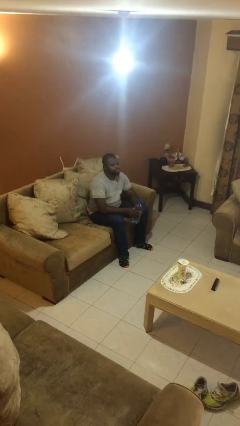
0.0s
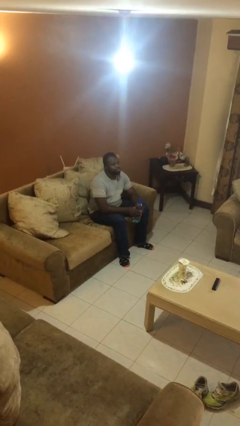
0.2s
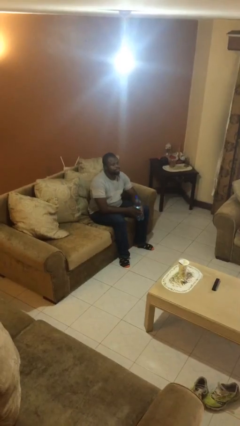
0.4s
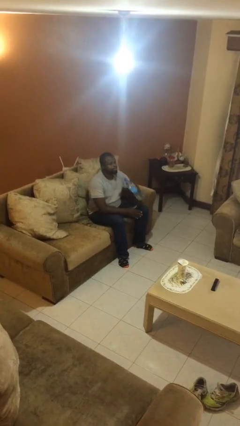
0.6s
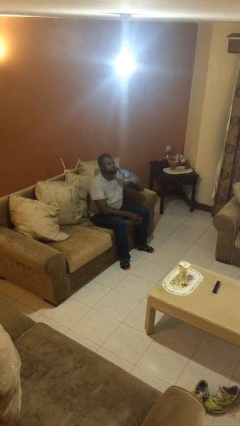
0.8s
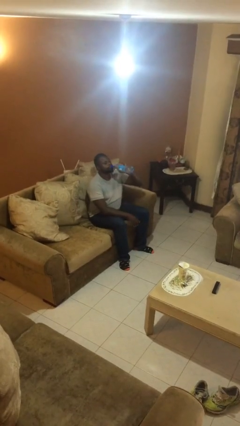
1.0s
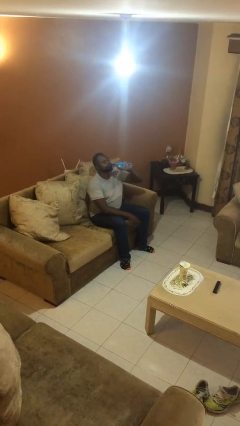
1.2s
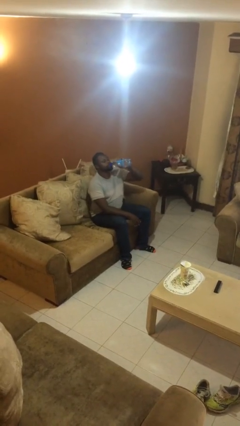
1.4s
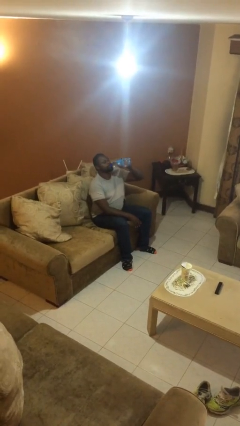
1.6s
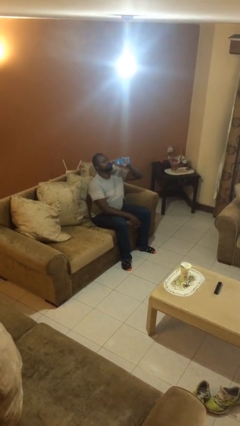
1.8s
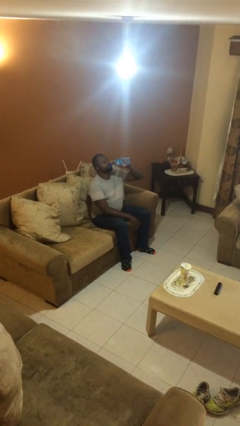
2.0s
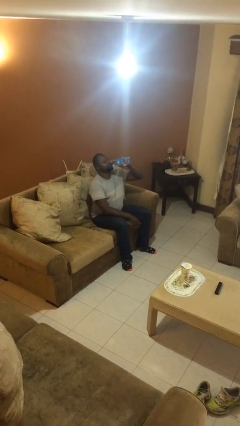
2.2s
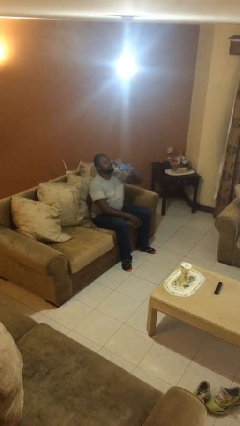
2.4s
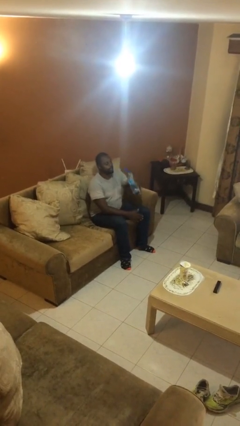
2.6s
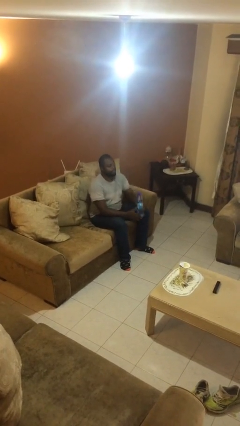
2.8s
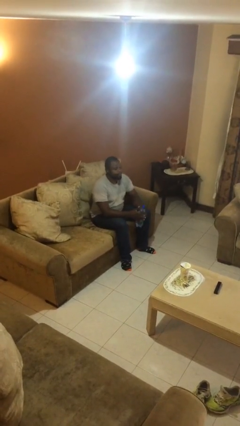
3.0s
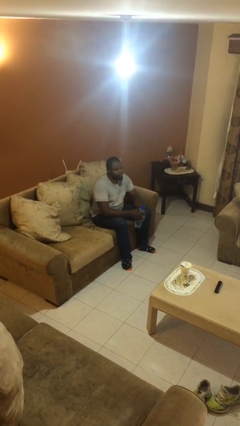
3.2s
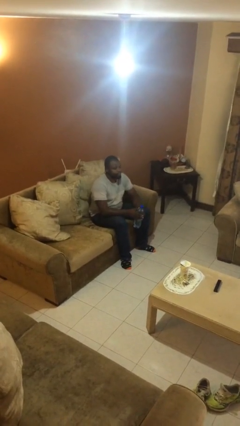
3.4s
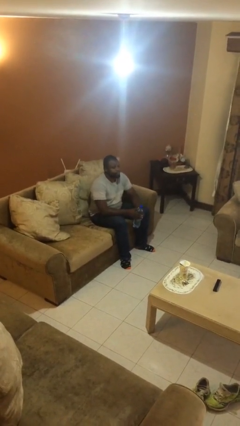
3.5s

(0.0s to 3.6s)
person drinks from bottle

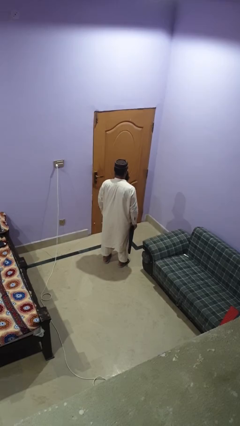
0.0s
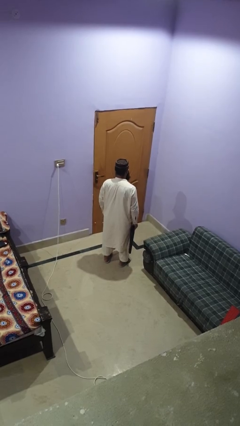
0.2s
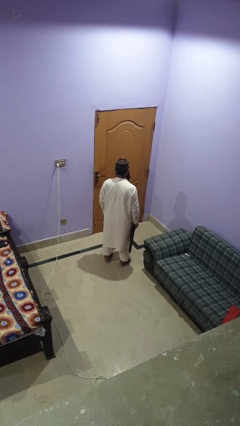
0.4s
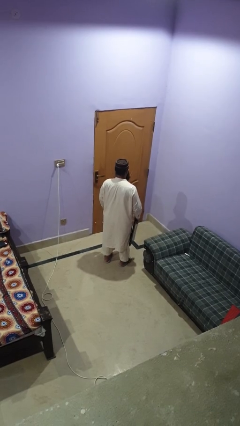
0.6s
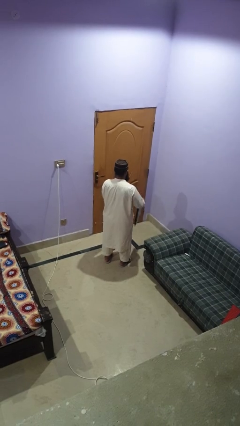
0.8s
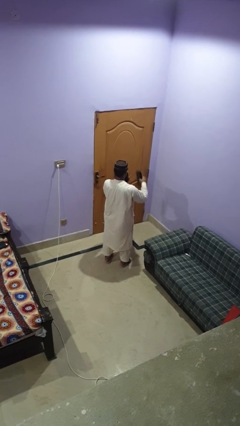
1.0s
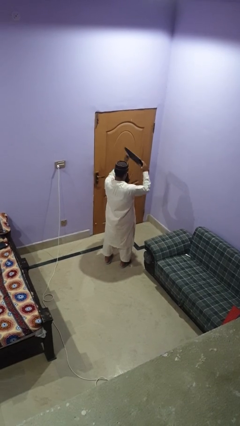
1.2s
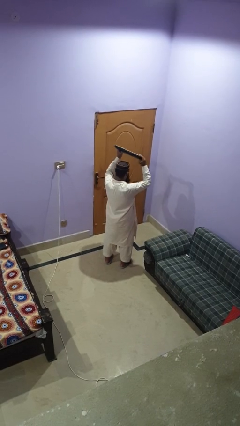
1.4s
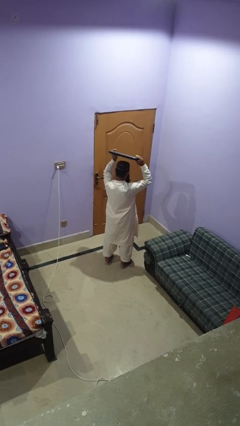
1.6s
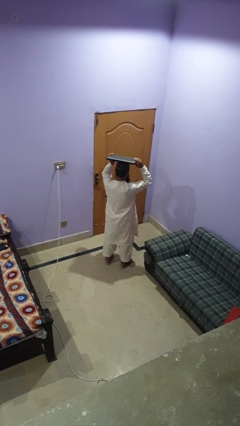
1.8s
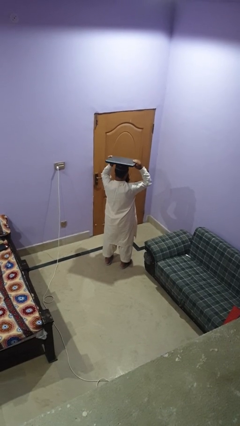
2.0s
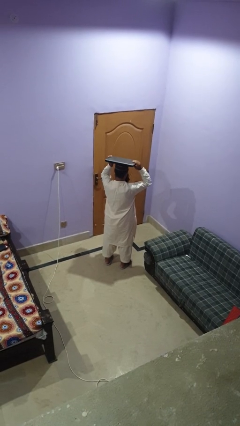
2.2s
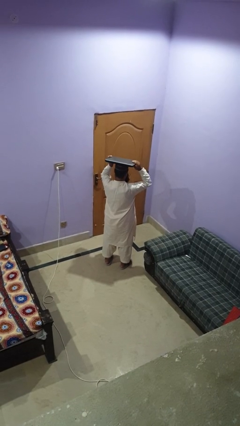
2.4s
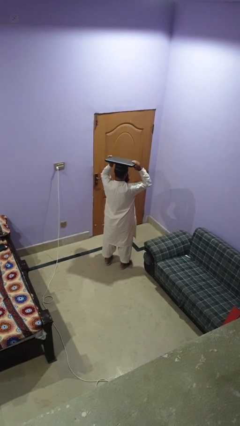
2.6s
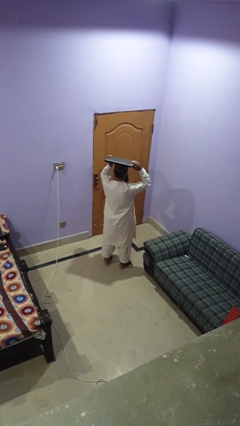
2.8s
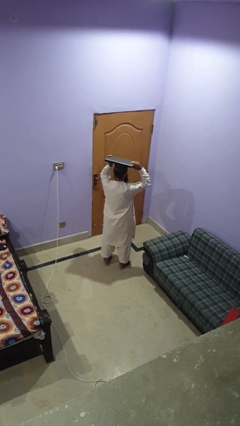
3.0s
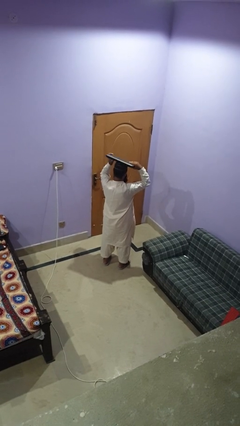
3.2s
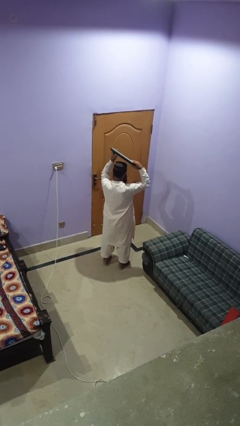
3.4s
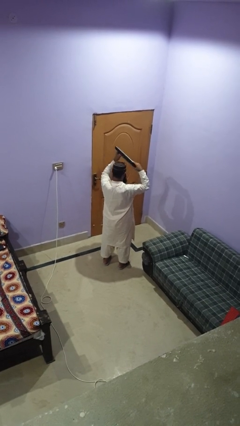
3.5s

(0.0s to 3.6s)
person holds object above head

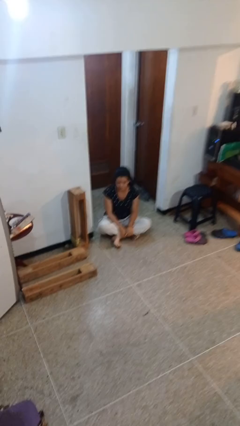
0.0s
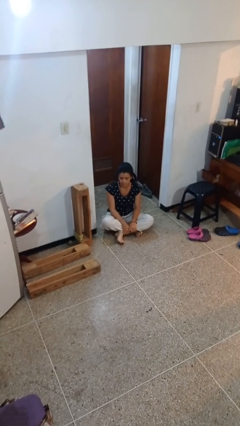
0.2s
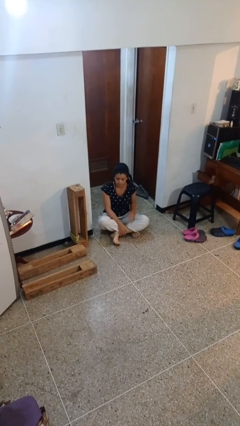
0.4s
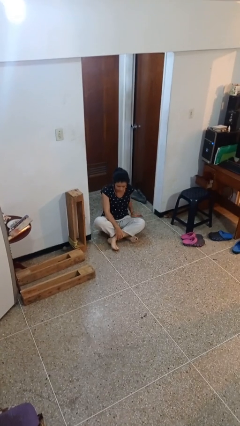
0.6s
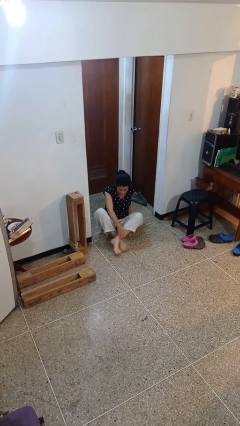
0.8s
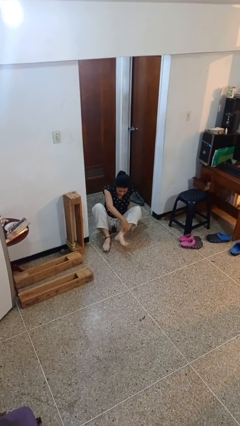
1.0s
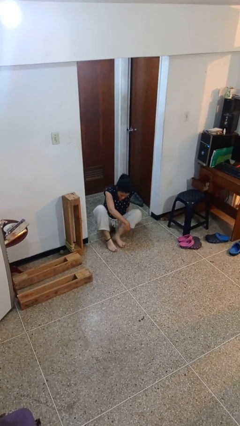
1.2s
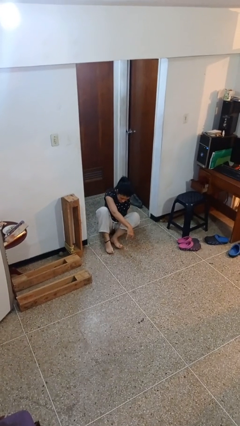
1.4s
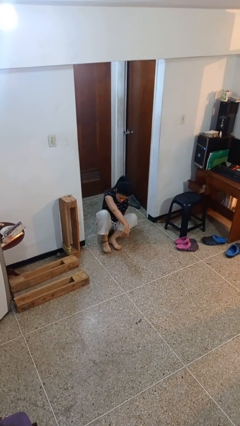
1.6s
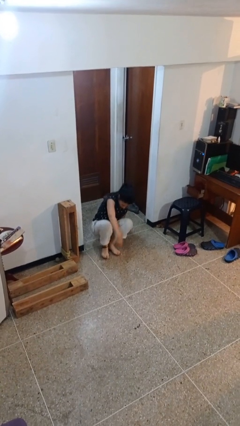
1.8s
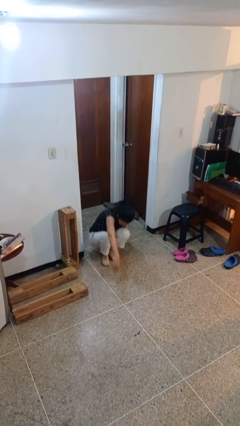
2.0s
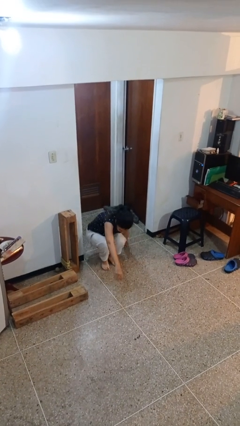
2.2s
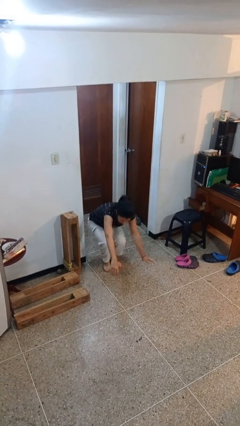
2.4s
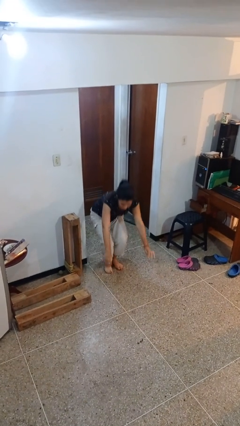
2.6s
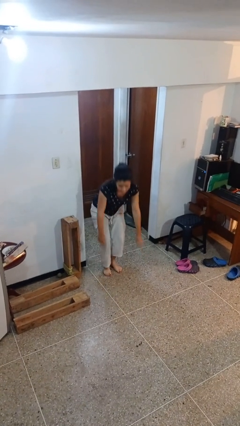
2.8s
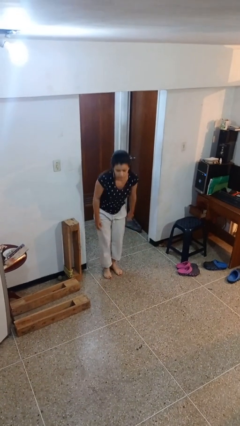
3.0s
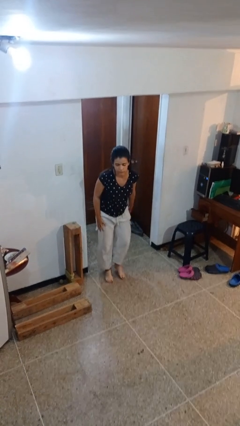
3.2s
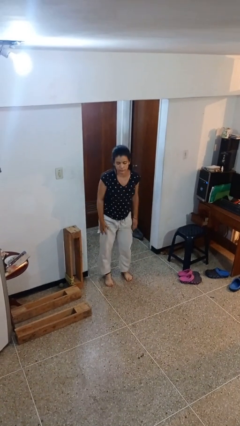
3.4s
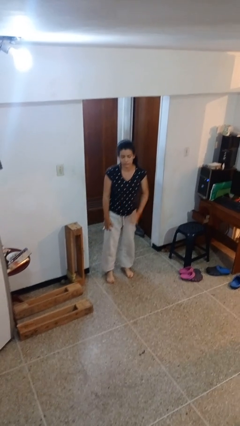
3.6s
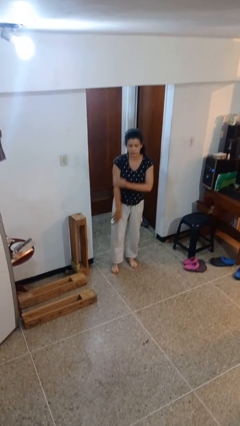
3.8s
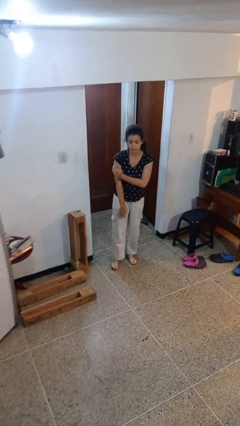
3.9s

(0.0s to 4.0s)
person stands up from floor

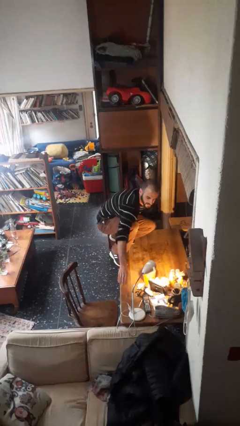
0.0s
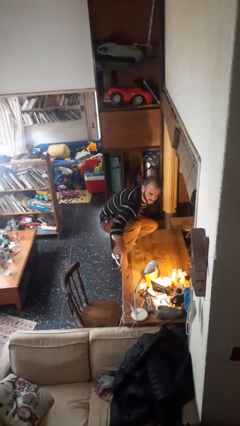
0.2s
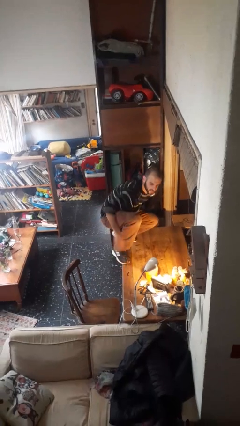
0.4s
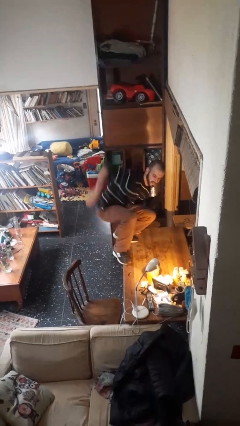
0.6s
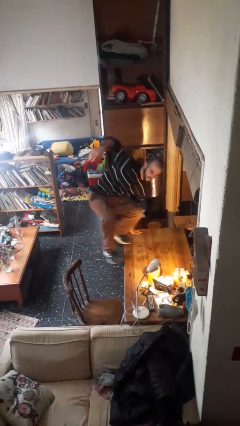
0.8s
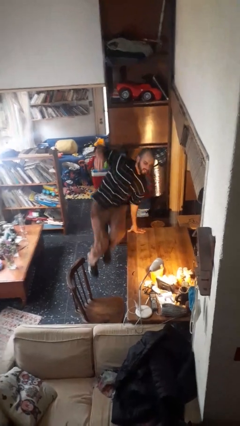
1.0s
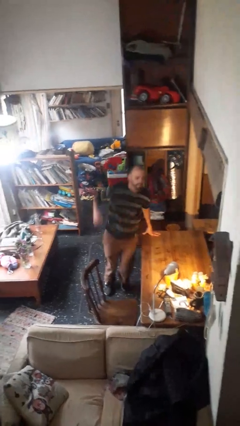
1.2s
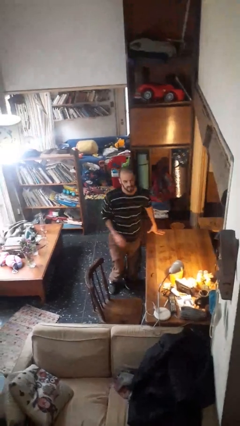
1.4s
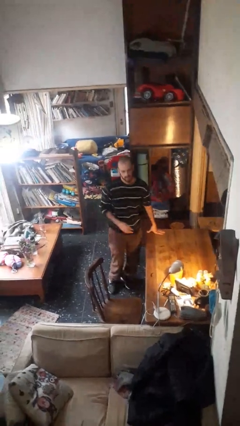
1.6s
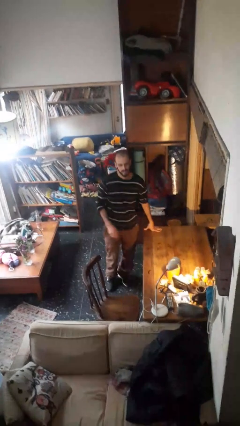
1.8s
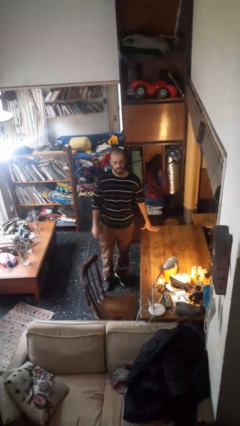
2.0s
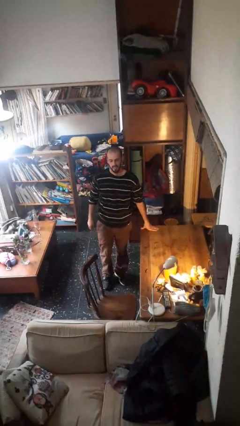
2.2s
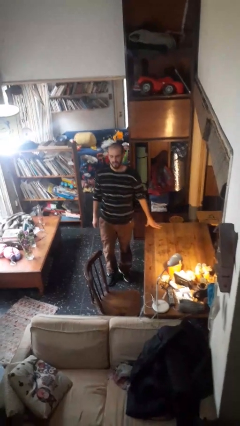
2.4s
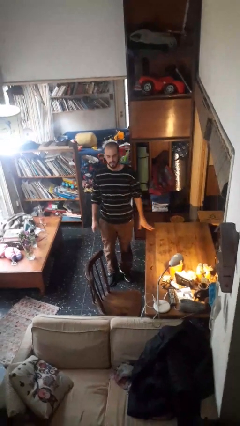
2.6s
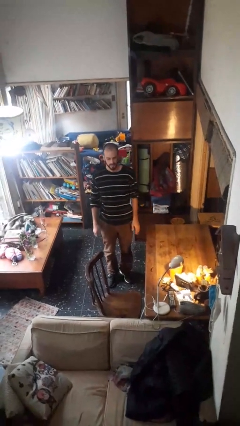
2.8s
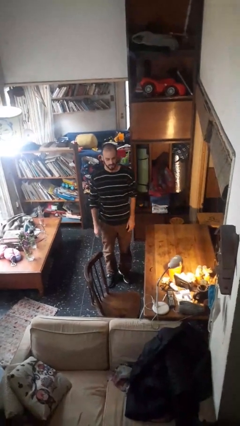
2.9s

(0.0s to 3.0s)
person climbs off table

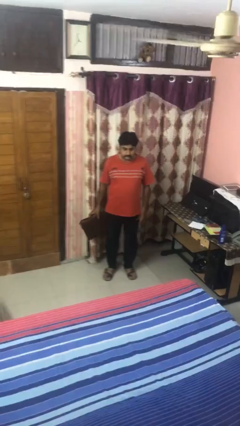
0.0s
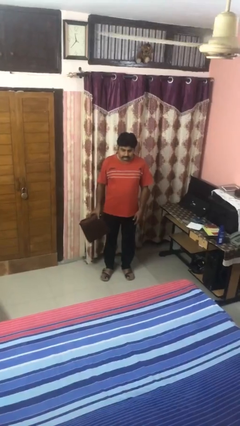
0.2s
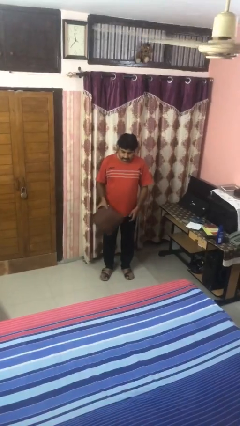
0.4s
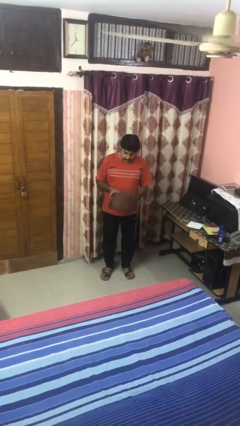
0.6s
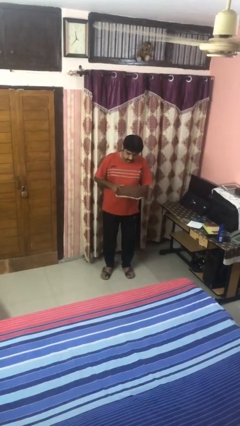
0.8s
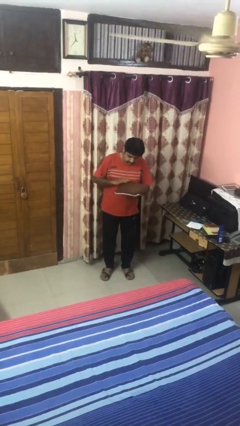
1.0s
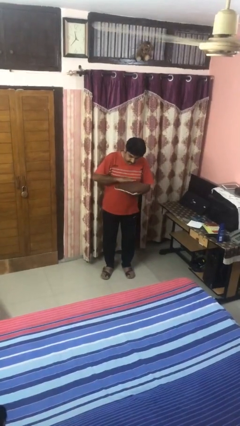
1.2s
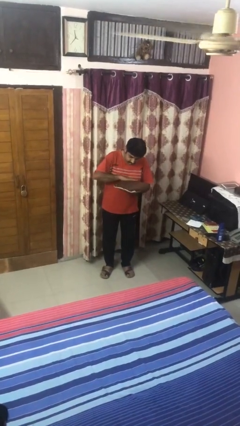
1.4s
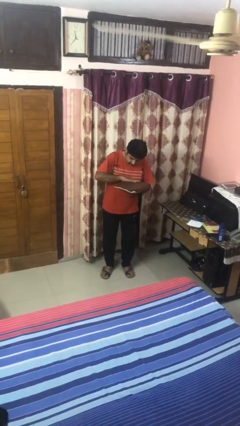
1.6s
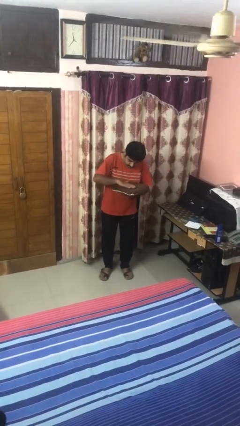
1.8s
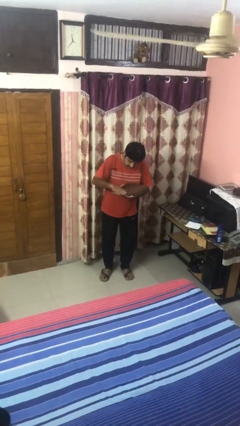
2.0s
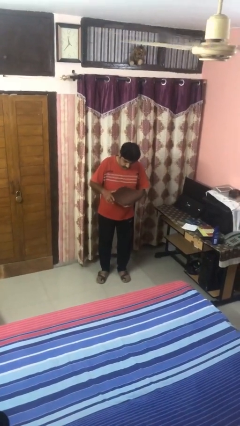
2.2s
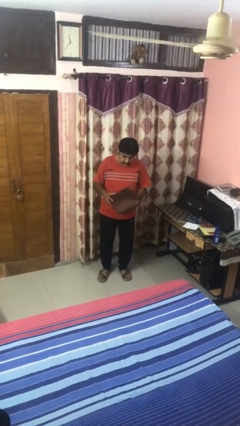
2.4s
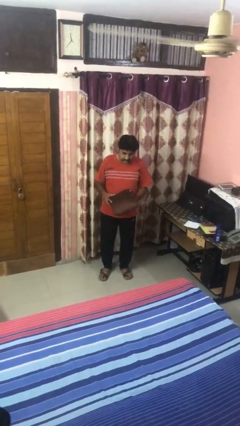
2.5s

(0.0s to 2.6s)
person waves hand over object

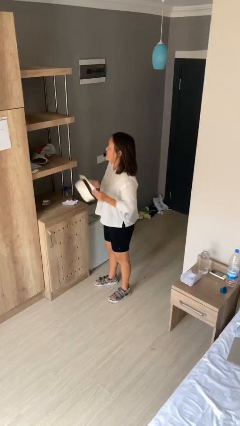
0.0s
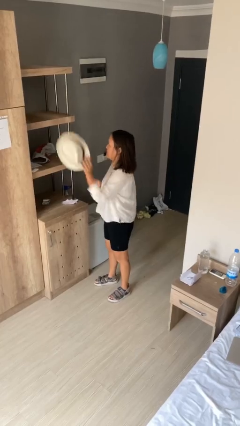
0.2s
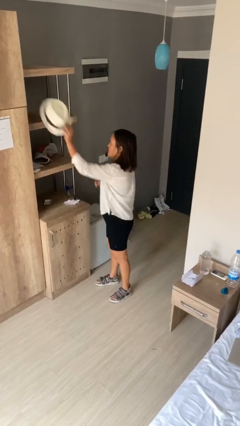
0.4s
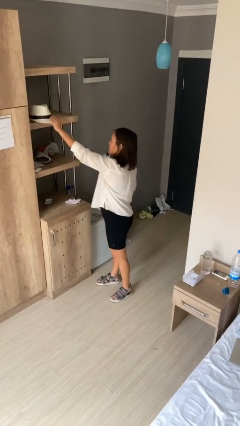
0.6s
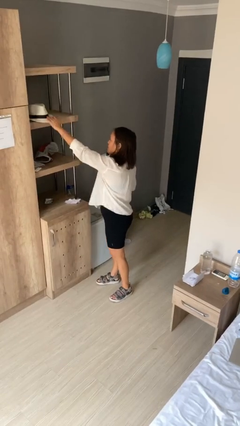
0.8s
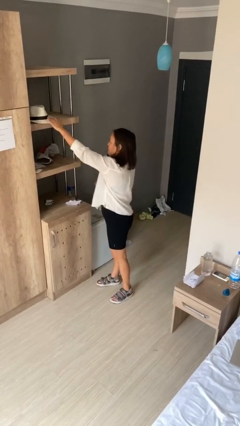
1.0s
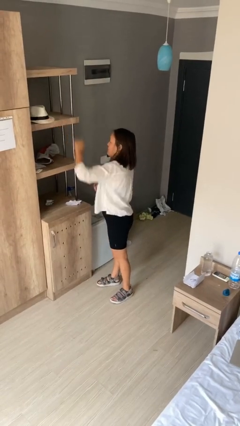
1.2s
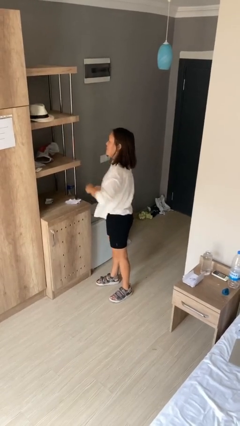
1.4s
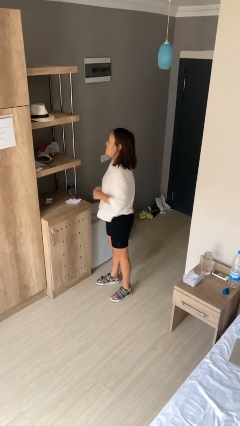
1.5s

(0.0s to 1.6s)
person puts down object on shelf
